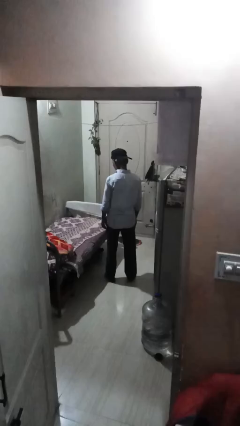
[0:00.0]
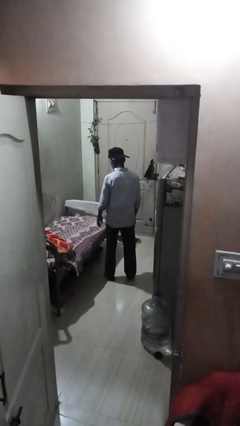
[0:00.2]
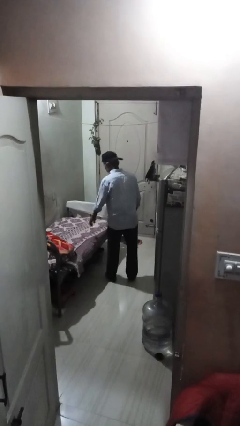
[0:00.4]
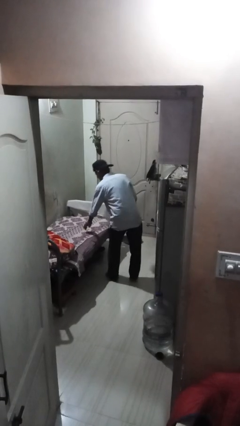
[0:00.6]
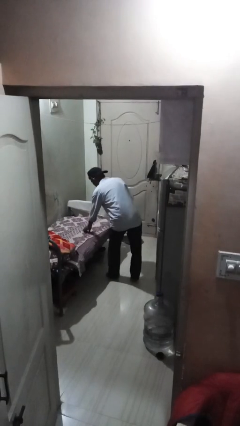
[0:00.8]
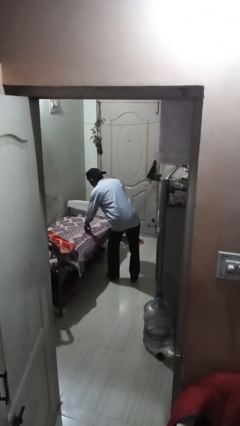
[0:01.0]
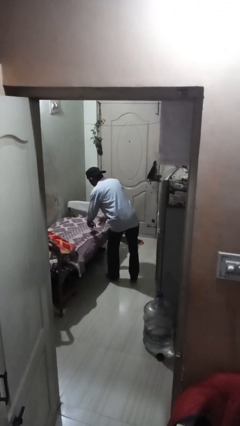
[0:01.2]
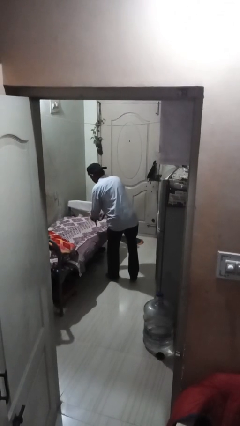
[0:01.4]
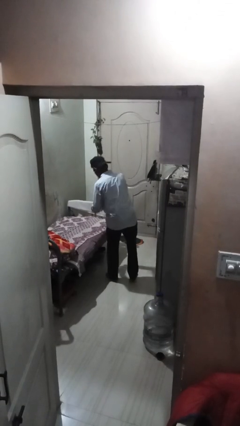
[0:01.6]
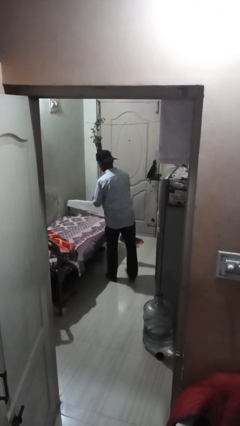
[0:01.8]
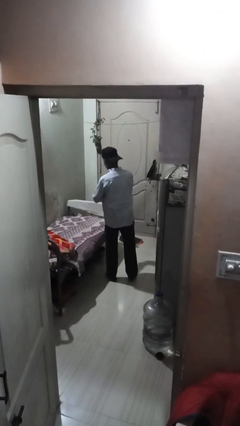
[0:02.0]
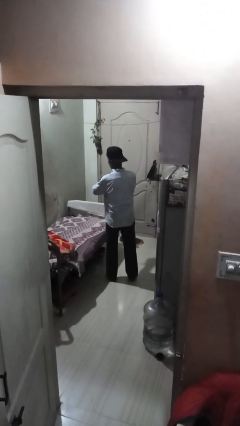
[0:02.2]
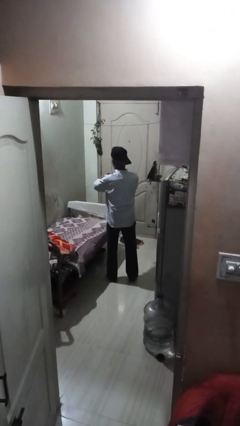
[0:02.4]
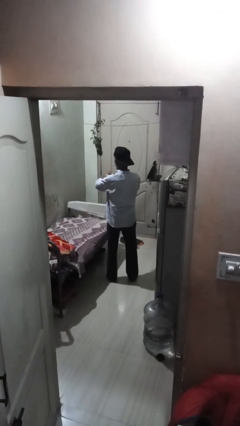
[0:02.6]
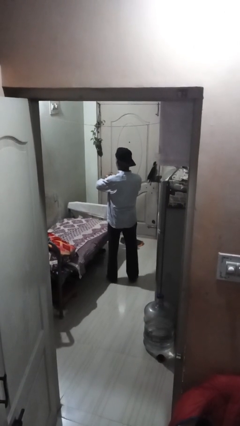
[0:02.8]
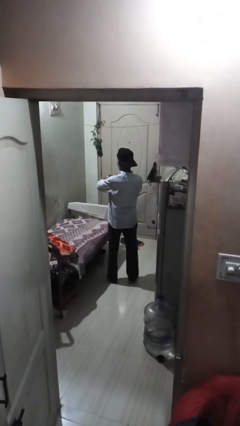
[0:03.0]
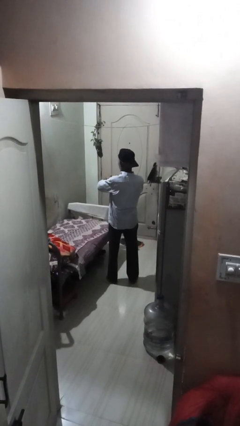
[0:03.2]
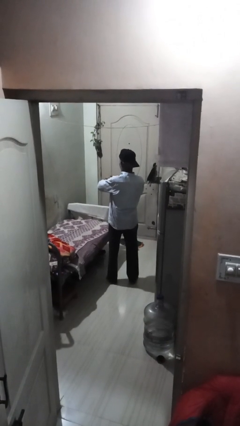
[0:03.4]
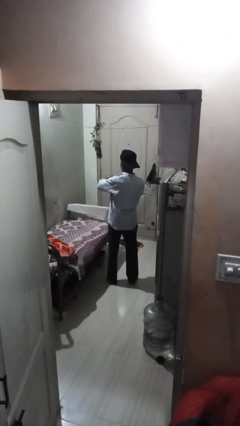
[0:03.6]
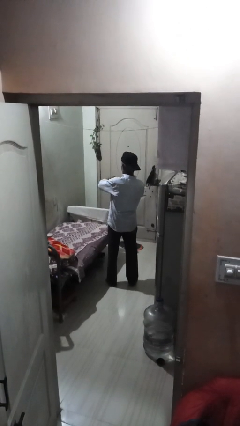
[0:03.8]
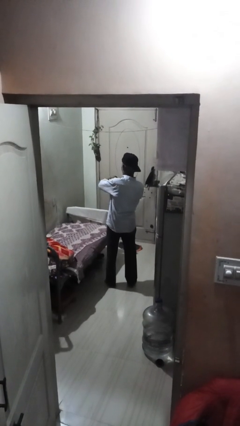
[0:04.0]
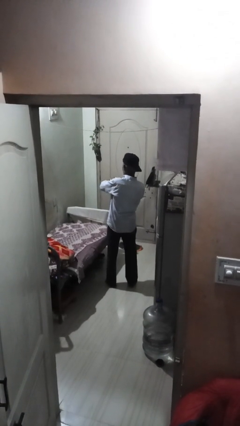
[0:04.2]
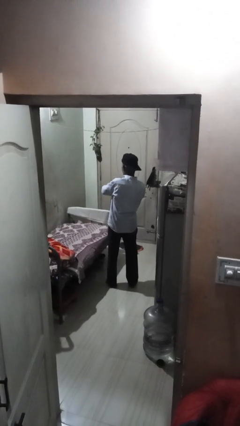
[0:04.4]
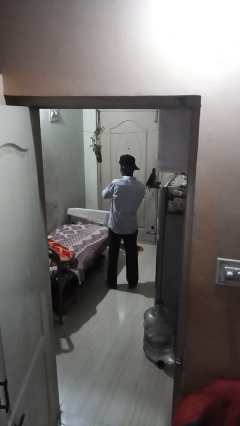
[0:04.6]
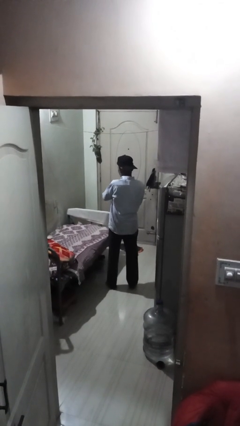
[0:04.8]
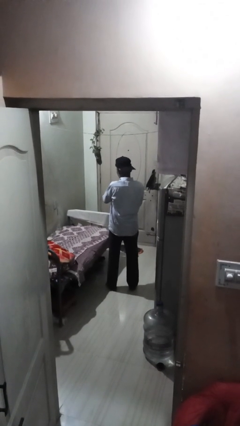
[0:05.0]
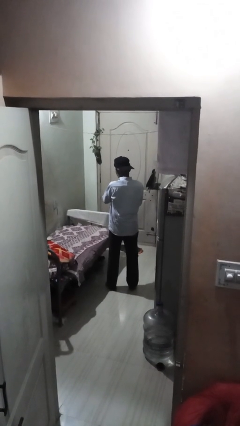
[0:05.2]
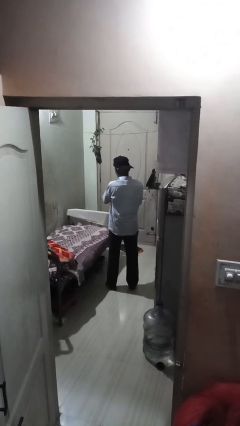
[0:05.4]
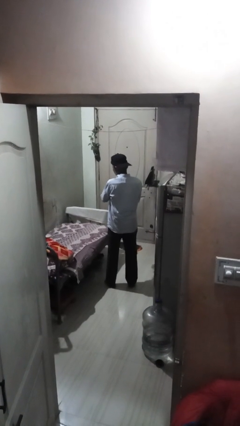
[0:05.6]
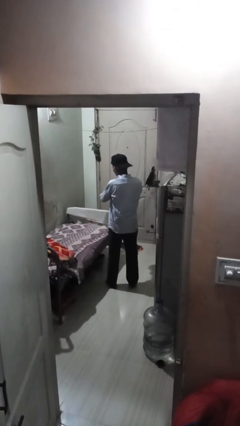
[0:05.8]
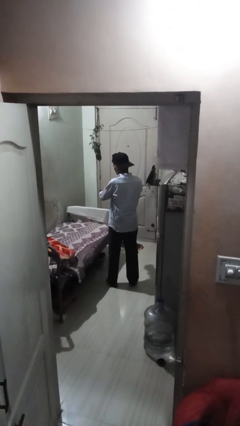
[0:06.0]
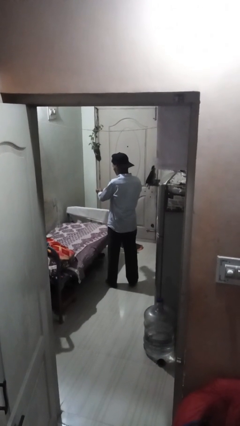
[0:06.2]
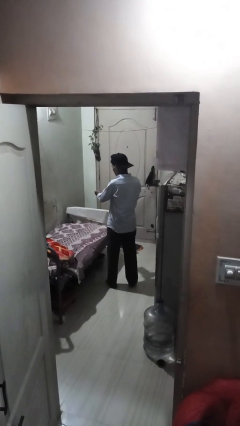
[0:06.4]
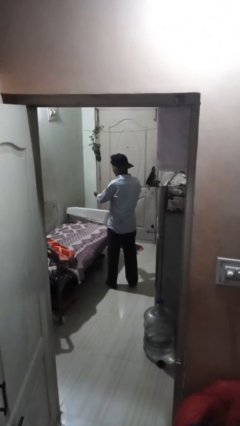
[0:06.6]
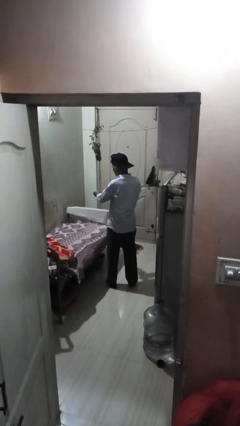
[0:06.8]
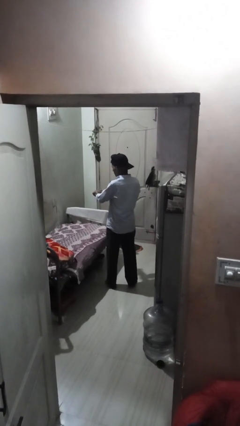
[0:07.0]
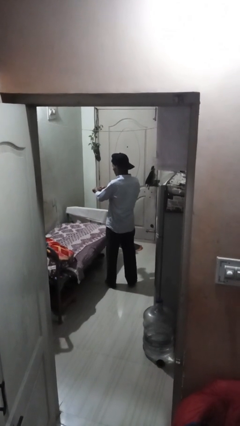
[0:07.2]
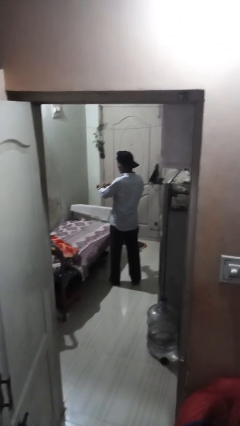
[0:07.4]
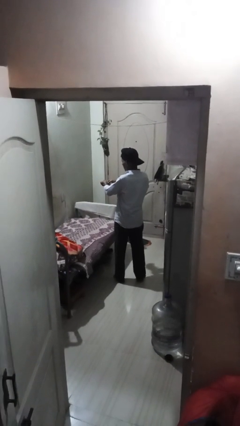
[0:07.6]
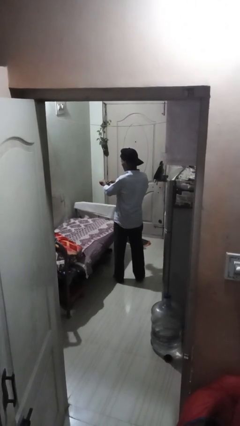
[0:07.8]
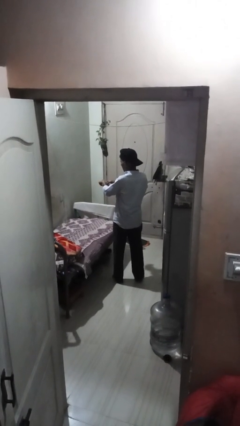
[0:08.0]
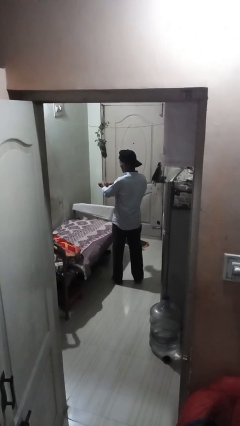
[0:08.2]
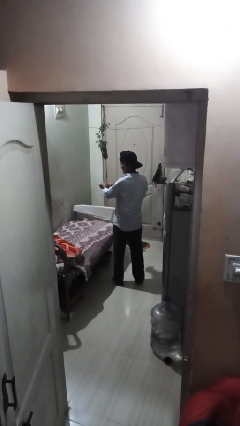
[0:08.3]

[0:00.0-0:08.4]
person puts on wristwatch

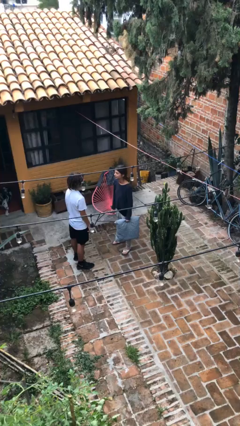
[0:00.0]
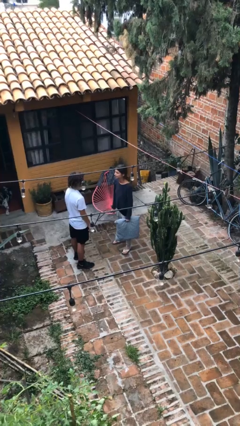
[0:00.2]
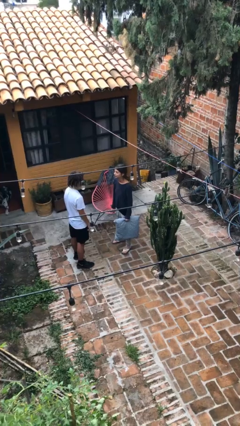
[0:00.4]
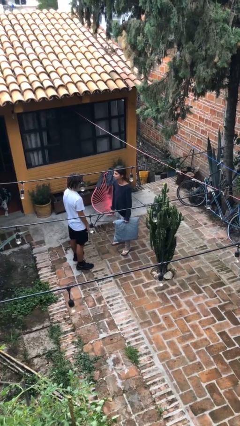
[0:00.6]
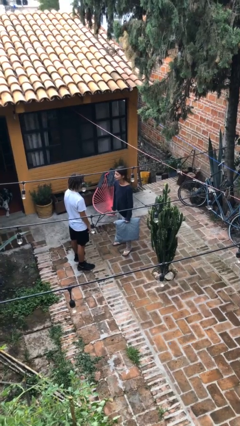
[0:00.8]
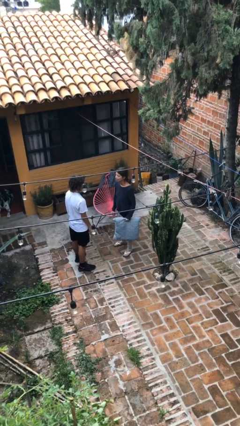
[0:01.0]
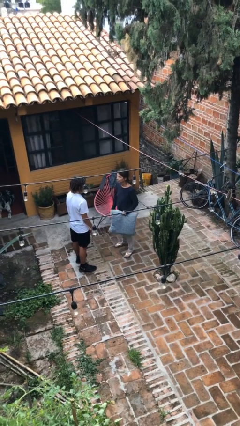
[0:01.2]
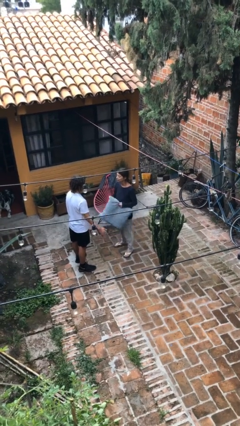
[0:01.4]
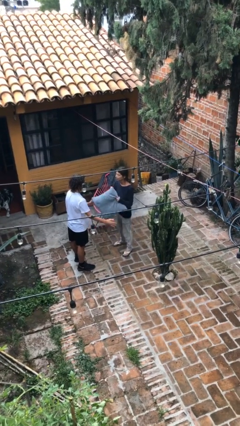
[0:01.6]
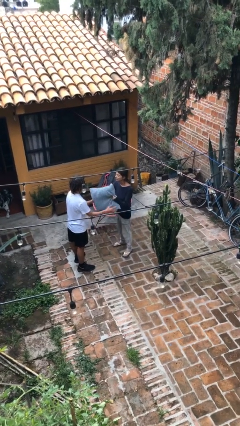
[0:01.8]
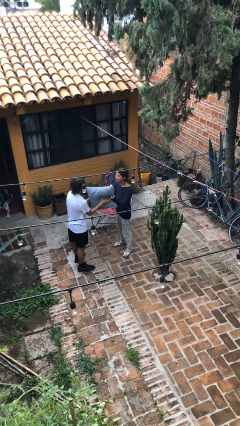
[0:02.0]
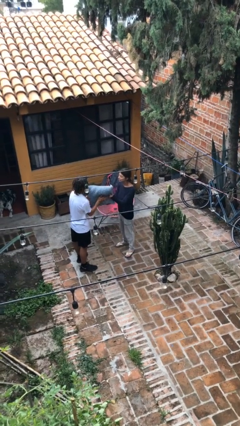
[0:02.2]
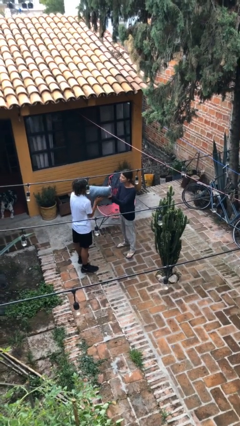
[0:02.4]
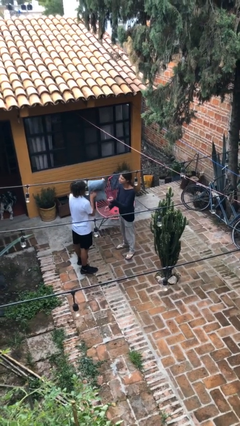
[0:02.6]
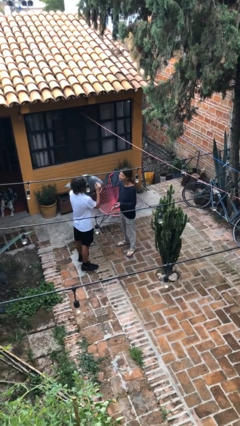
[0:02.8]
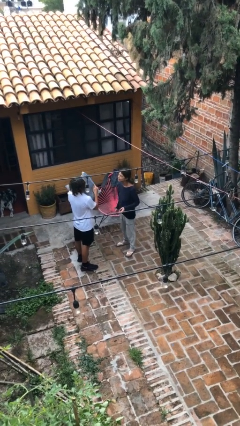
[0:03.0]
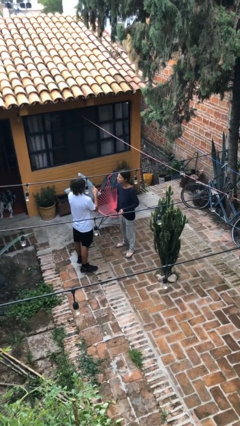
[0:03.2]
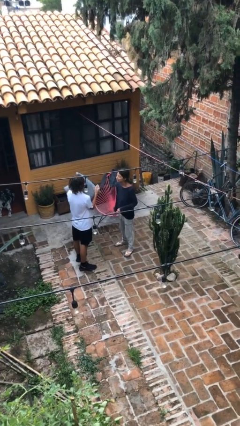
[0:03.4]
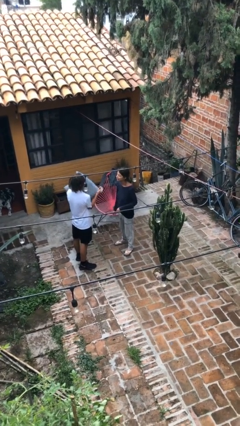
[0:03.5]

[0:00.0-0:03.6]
person transfers object to person

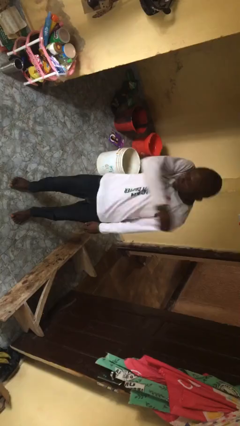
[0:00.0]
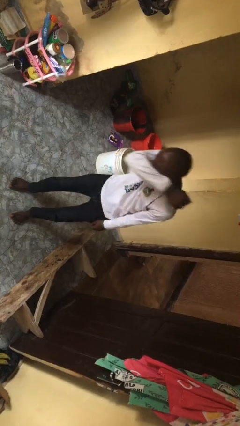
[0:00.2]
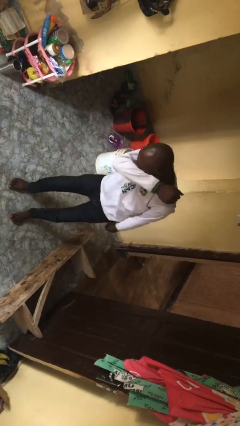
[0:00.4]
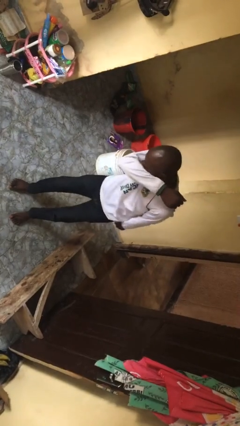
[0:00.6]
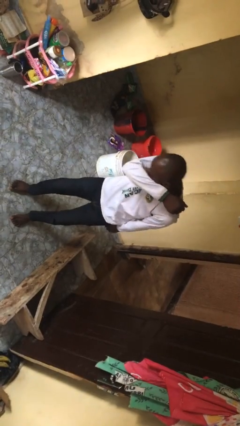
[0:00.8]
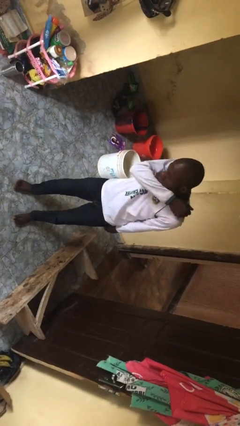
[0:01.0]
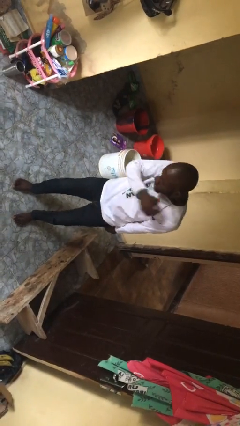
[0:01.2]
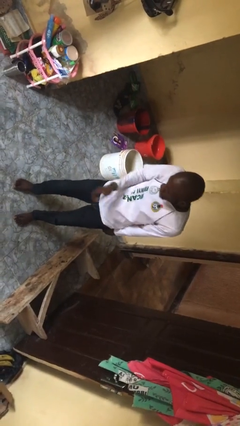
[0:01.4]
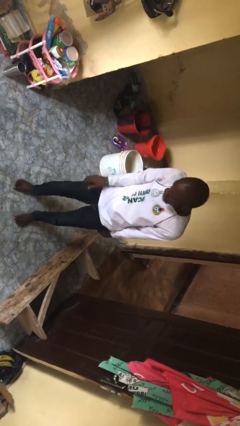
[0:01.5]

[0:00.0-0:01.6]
person sneezes into arm

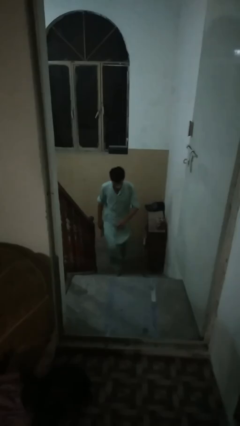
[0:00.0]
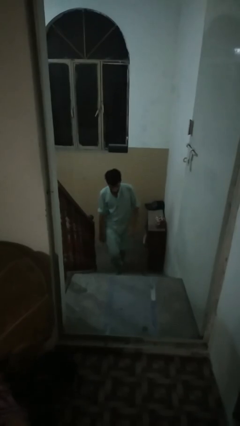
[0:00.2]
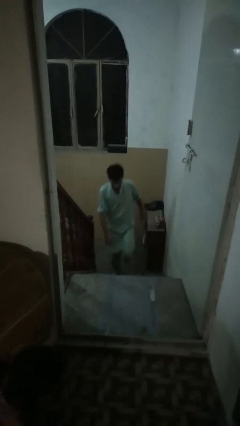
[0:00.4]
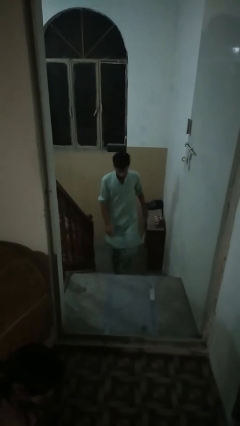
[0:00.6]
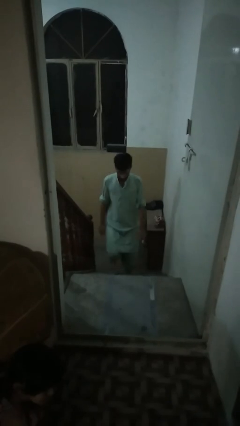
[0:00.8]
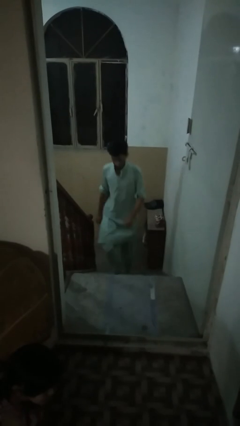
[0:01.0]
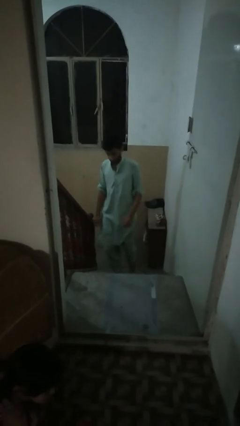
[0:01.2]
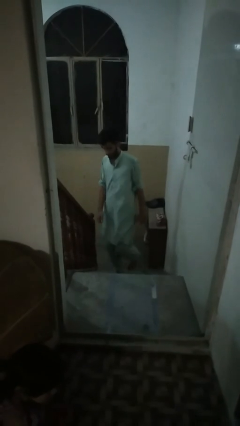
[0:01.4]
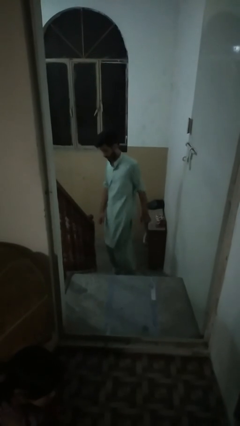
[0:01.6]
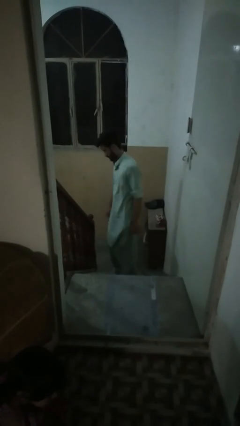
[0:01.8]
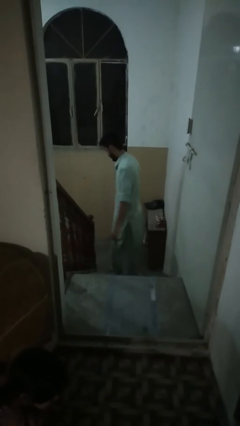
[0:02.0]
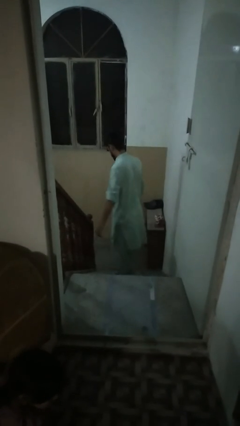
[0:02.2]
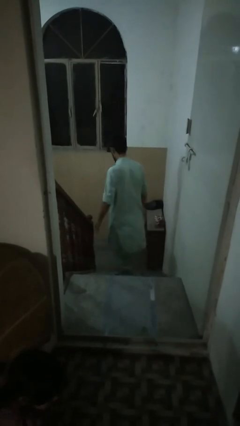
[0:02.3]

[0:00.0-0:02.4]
person climbs up stairs

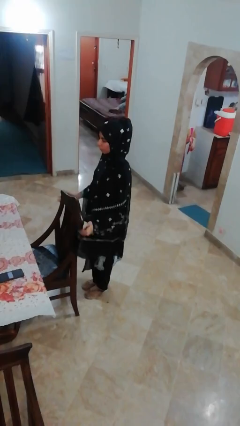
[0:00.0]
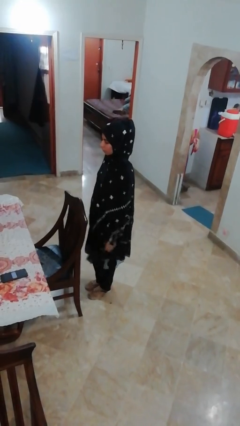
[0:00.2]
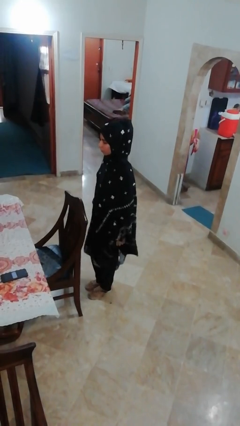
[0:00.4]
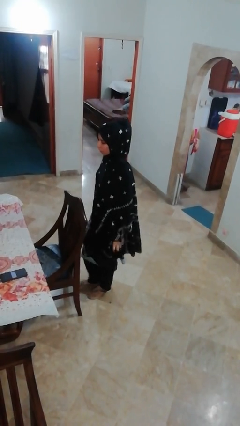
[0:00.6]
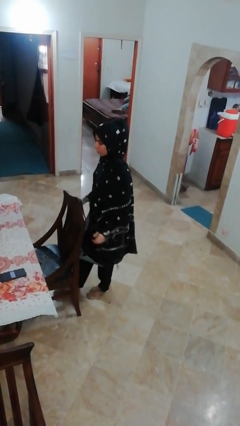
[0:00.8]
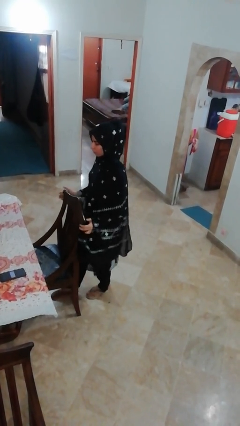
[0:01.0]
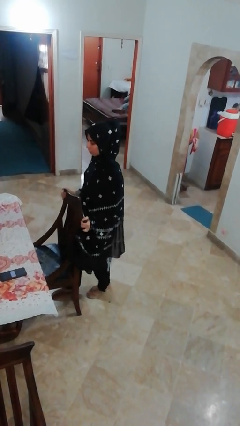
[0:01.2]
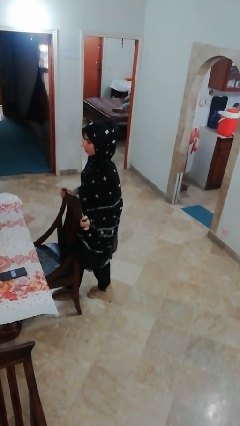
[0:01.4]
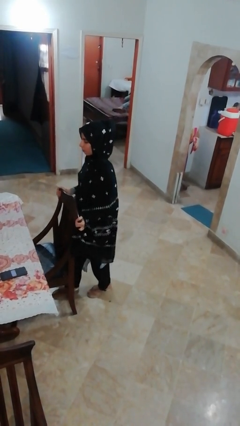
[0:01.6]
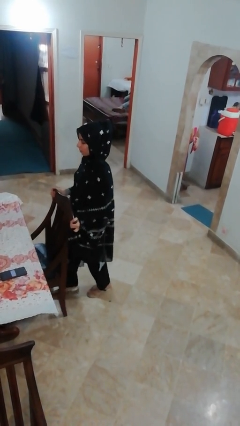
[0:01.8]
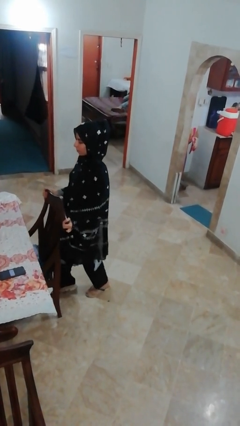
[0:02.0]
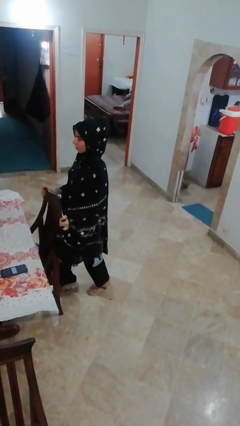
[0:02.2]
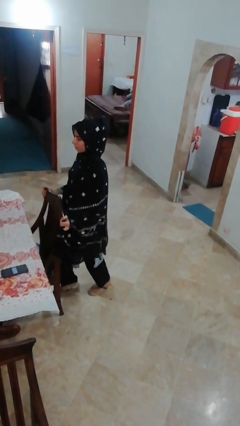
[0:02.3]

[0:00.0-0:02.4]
person pushes in chair
